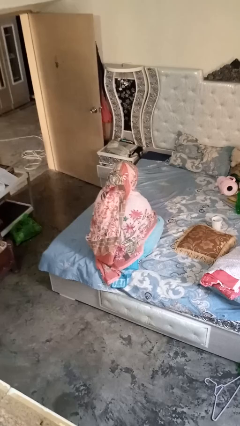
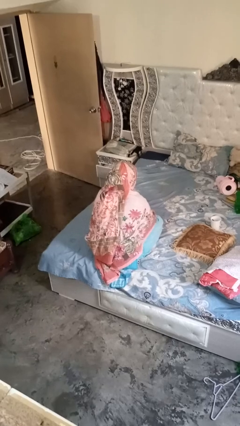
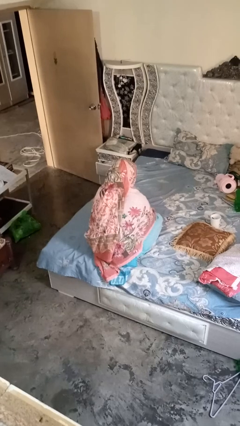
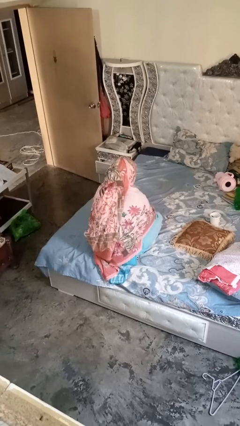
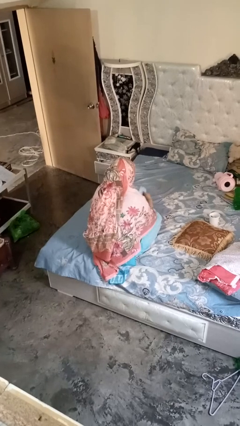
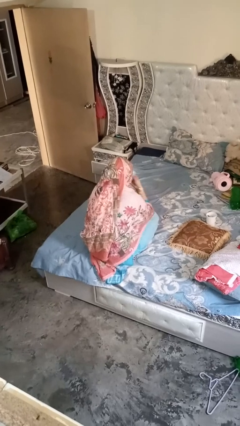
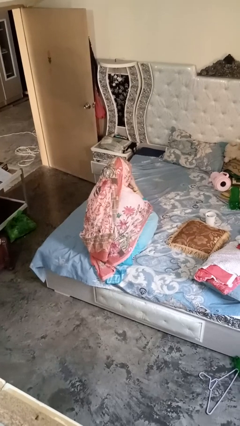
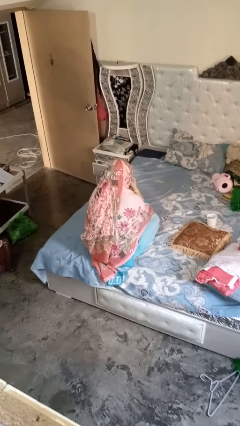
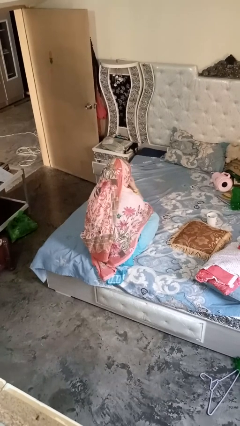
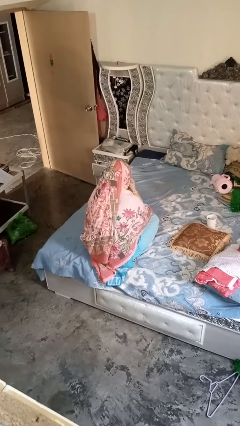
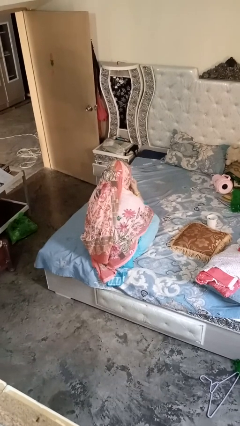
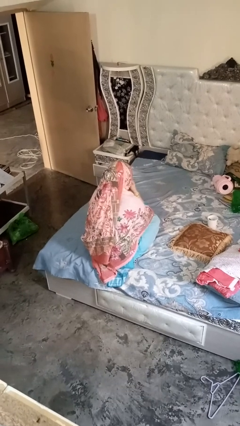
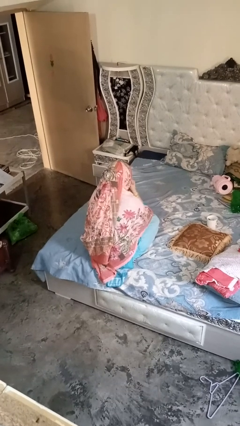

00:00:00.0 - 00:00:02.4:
person blows nose

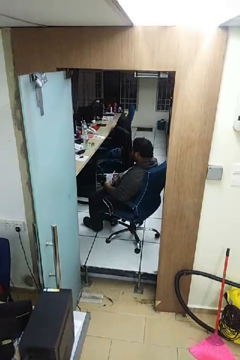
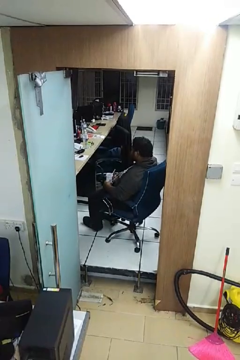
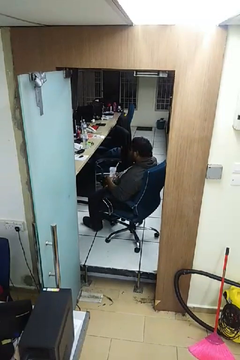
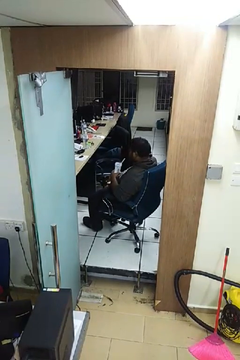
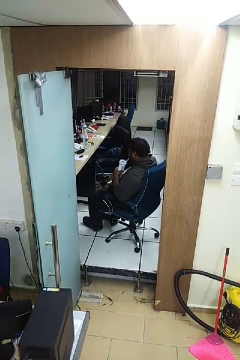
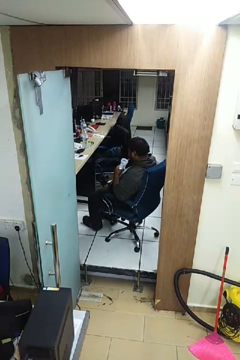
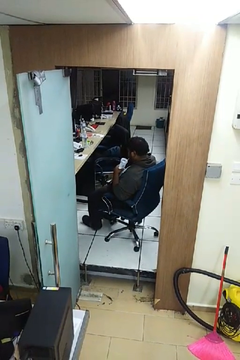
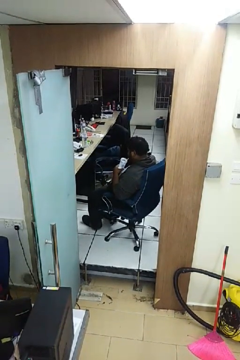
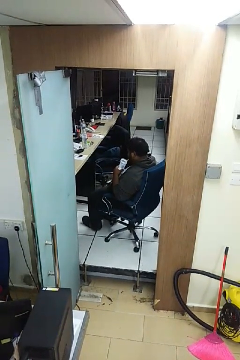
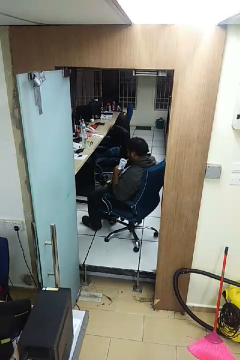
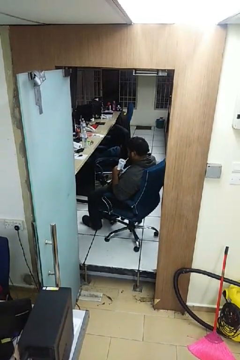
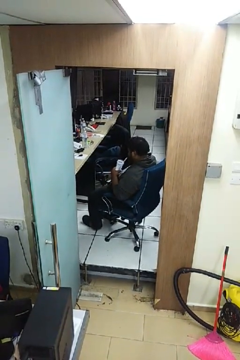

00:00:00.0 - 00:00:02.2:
person drinks from straw

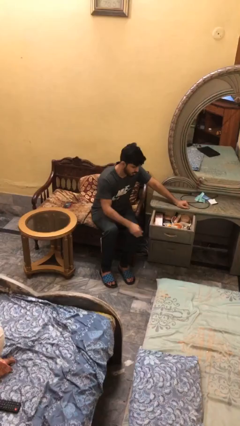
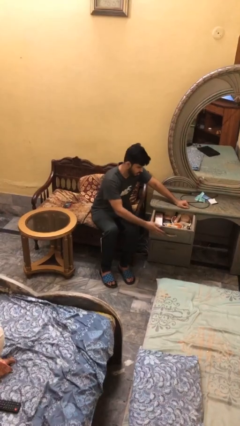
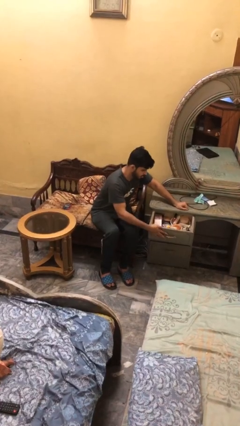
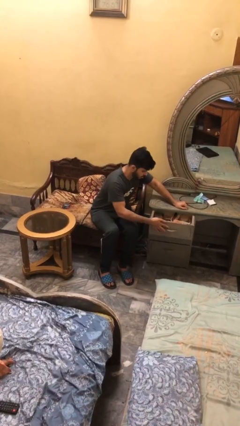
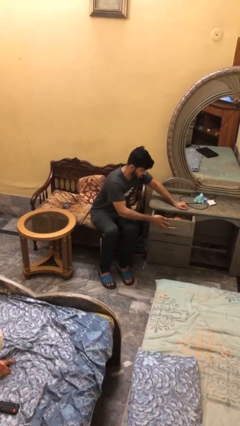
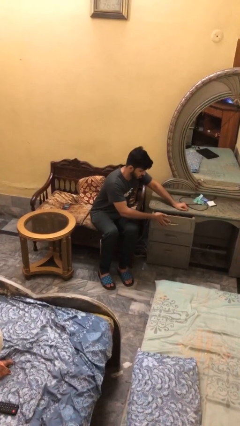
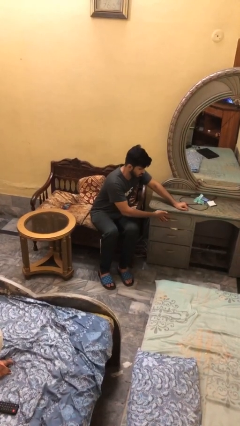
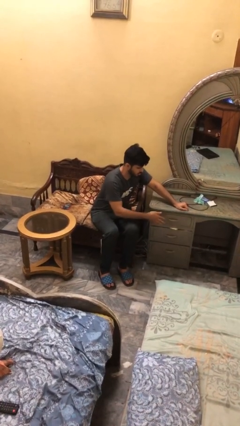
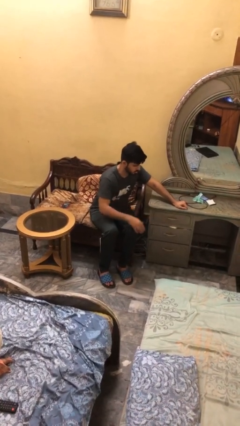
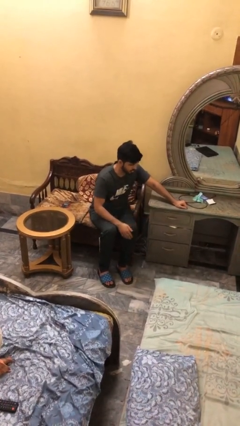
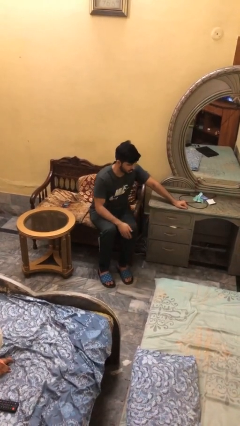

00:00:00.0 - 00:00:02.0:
person closes dresser drawer

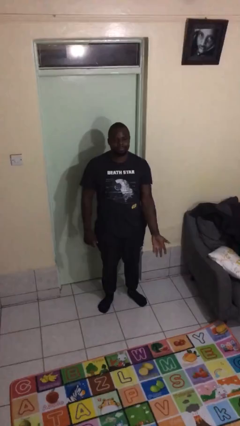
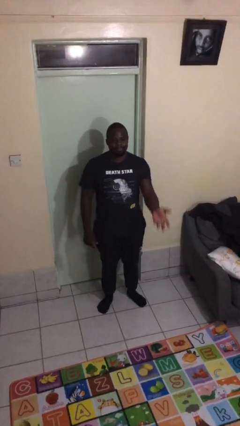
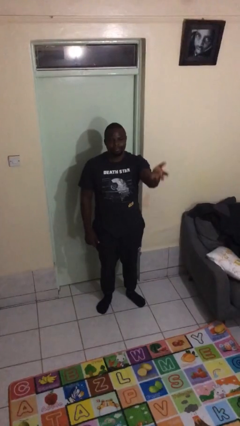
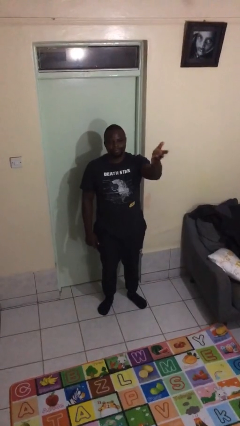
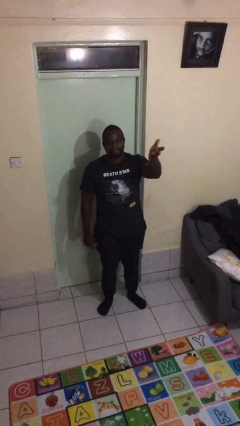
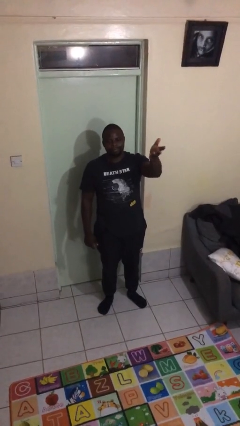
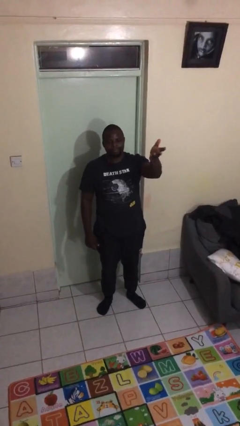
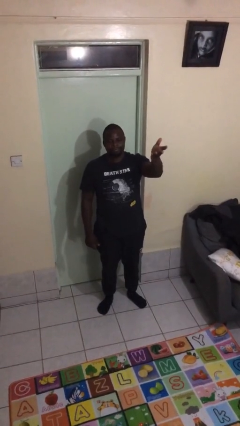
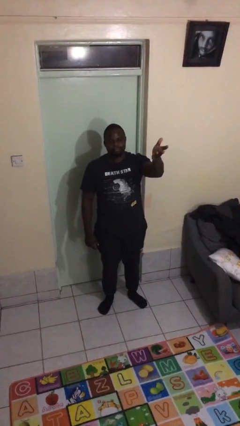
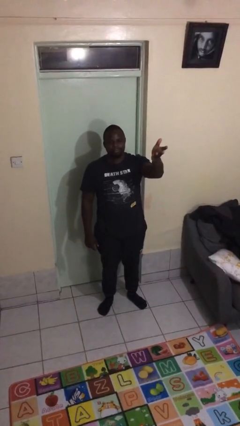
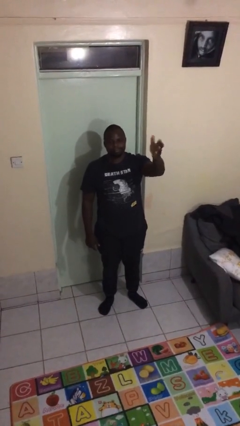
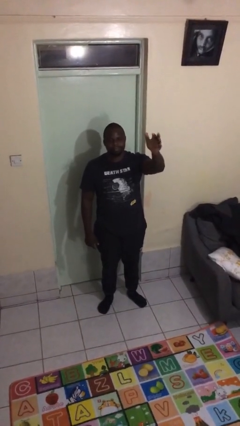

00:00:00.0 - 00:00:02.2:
person gestures swipe up

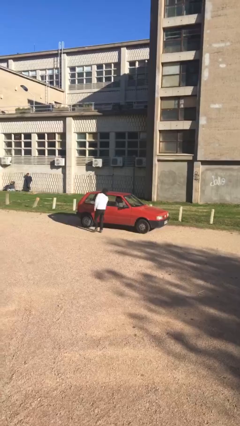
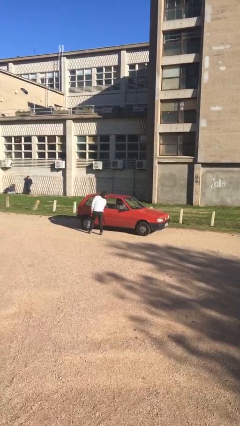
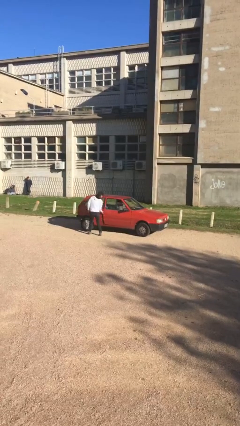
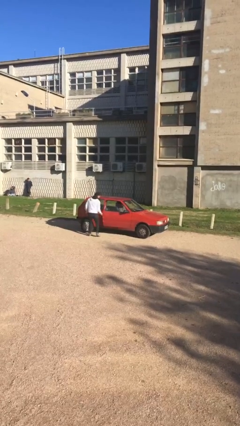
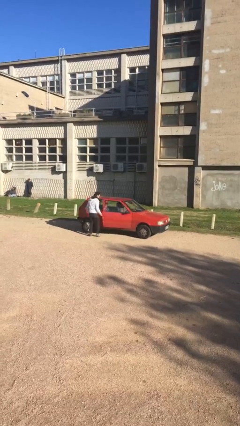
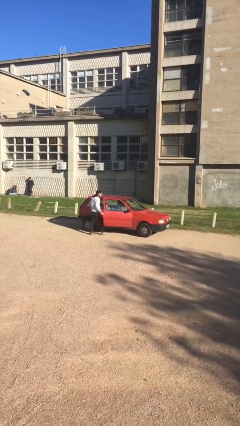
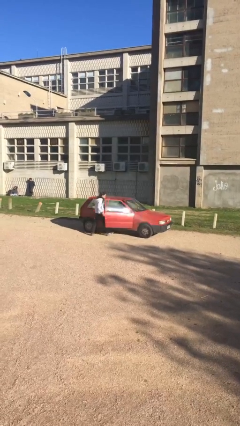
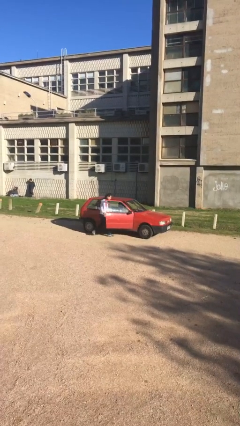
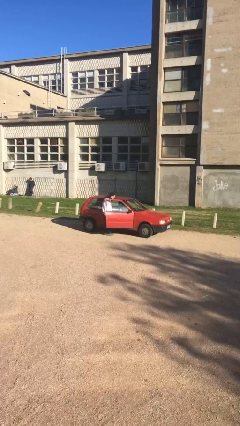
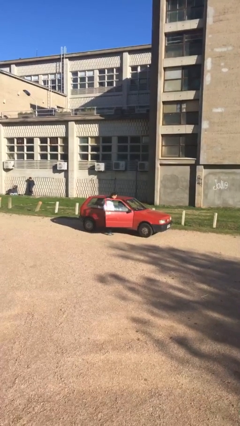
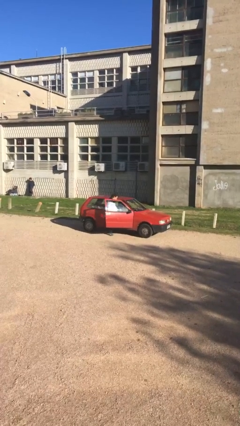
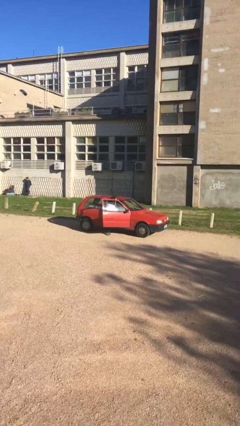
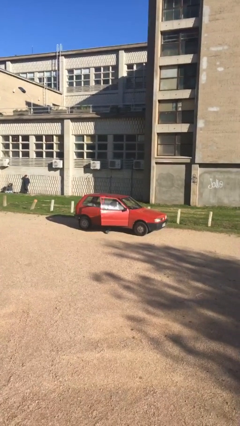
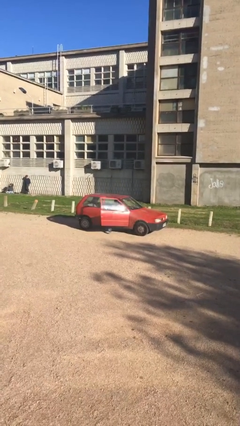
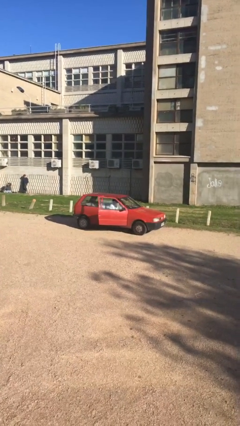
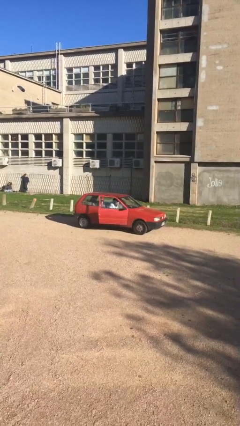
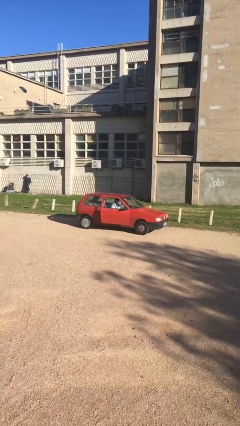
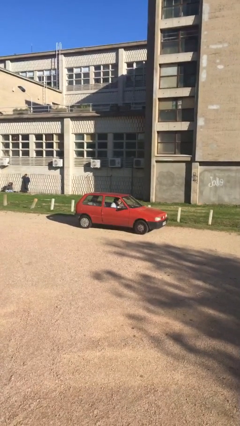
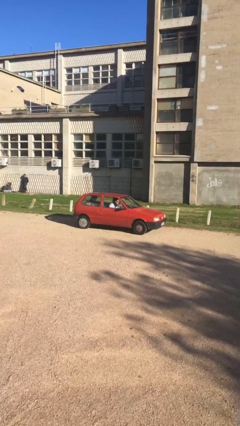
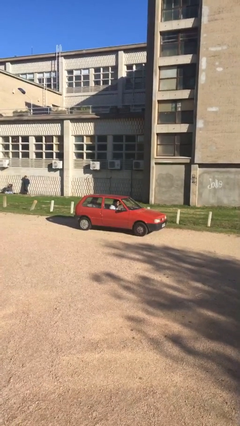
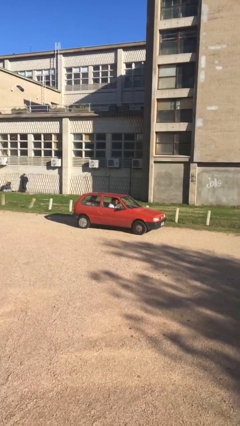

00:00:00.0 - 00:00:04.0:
car picks up person

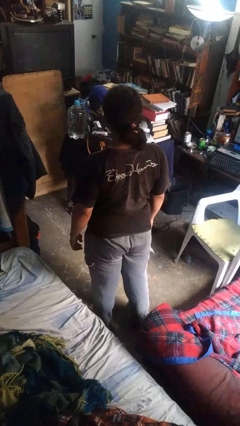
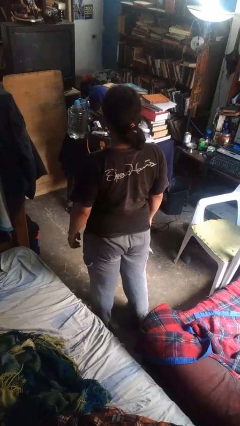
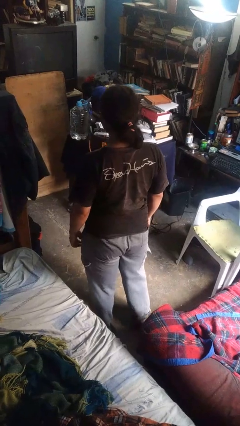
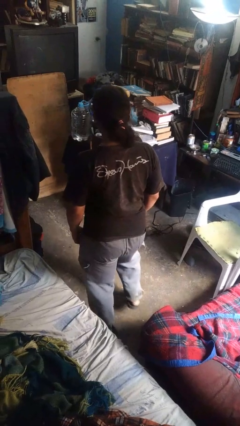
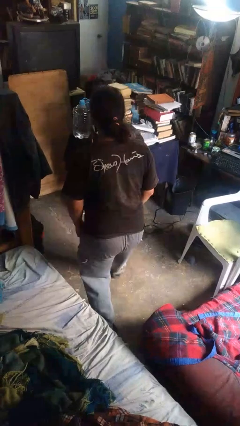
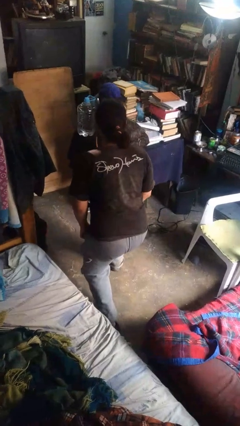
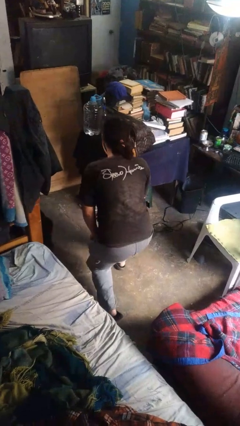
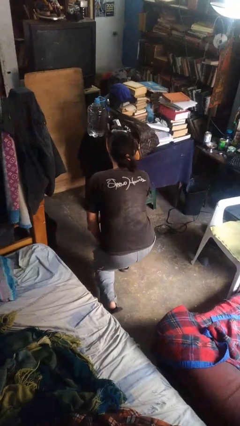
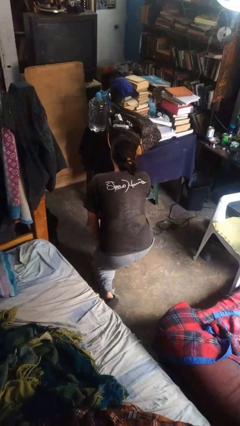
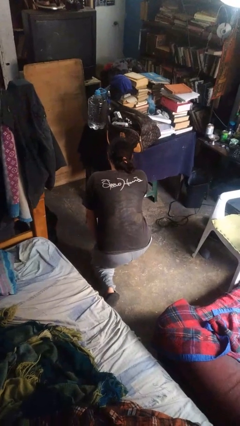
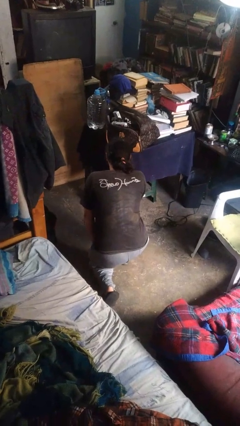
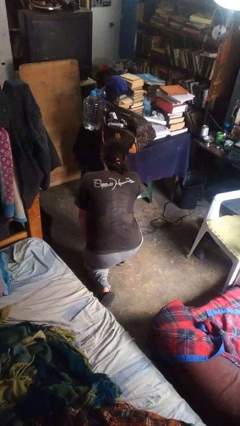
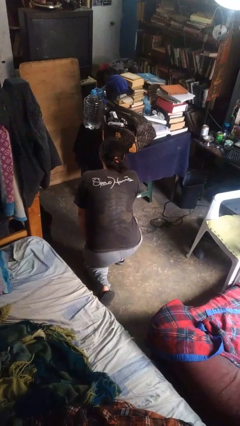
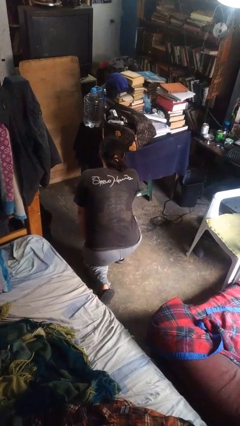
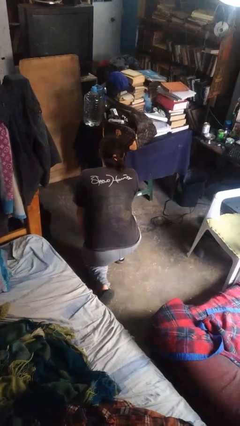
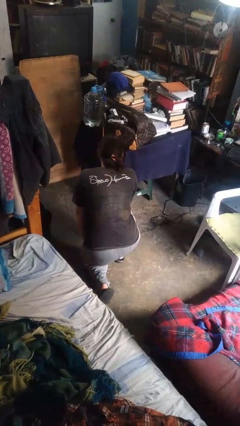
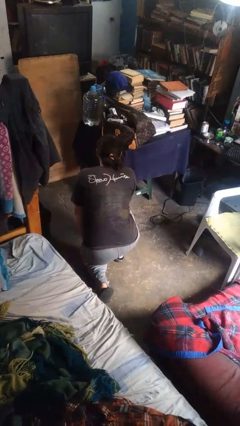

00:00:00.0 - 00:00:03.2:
person kneels

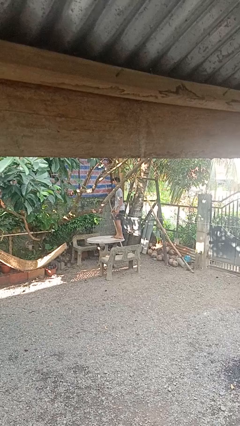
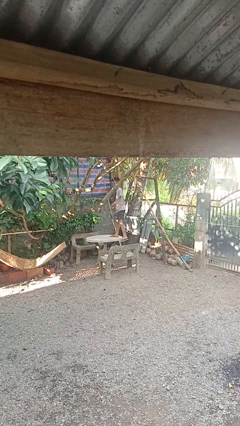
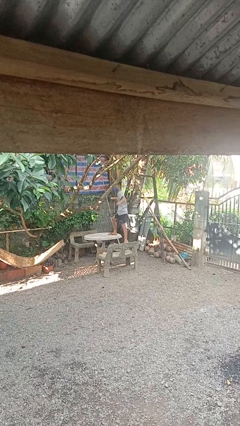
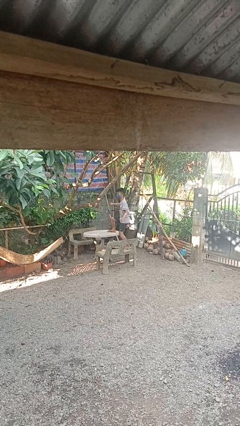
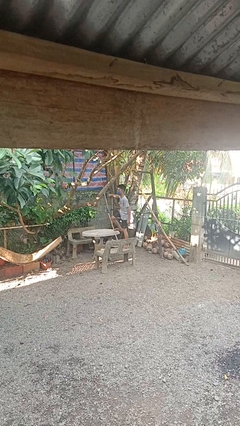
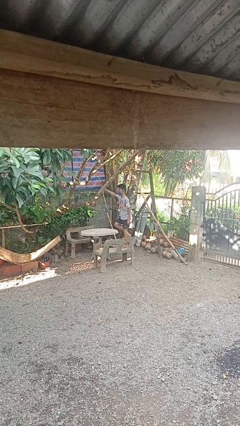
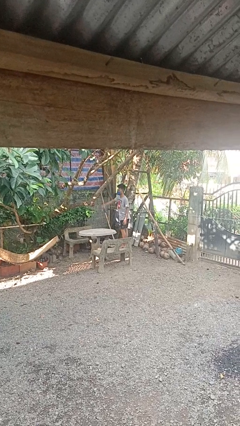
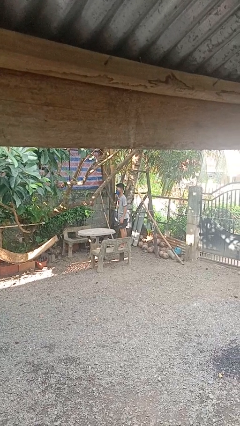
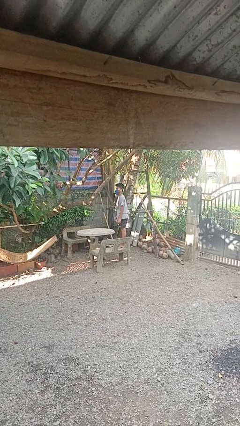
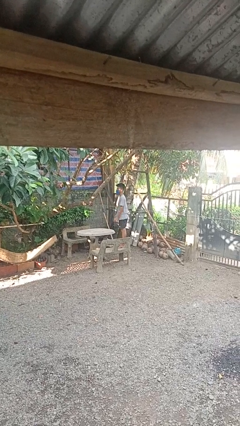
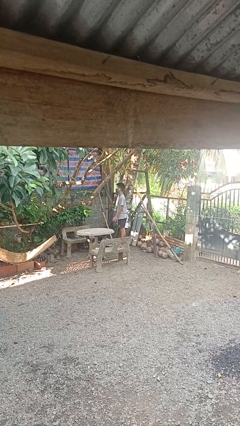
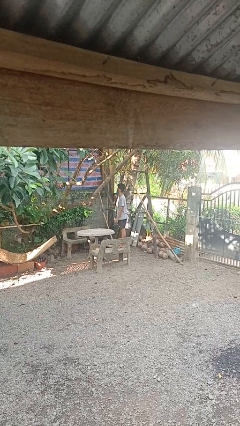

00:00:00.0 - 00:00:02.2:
person climbs off table
